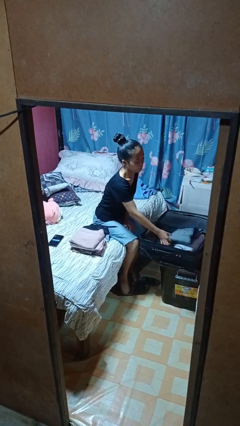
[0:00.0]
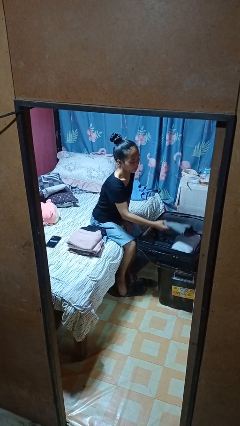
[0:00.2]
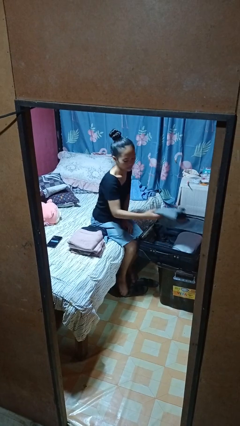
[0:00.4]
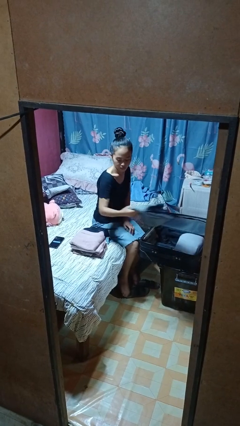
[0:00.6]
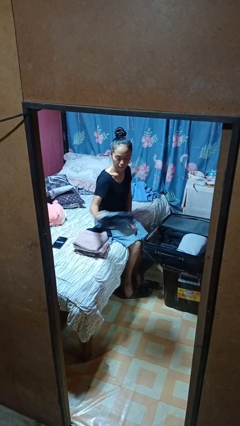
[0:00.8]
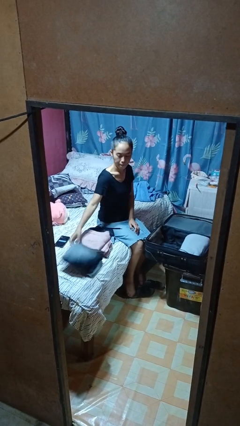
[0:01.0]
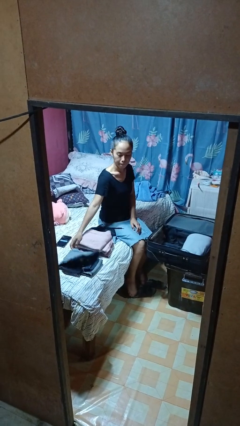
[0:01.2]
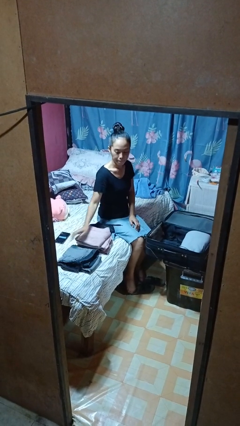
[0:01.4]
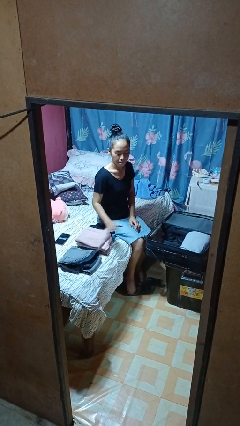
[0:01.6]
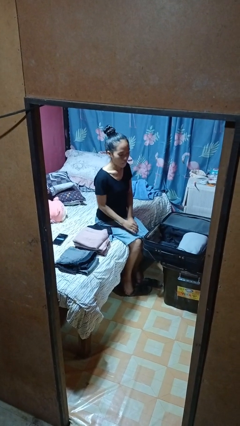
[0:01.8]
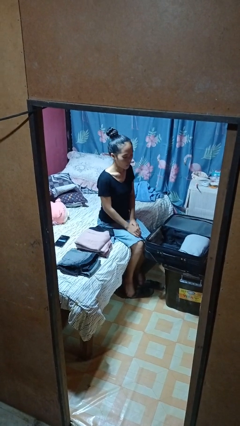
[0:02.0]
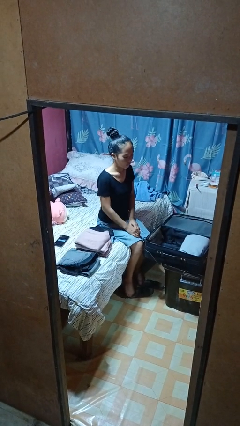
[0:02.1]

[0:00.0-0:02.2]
person unloads clothes from suitcase

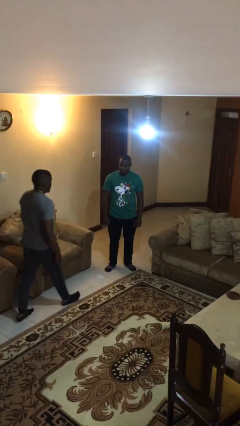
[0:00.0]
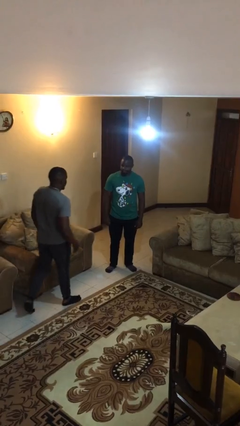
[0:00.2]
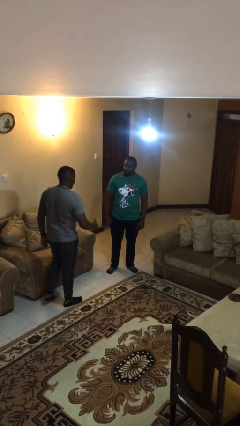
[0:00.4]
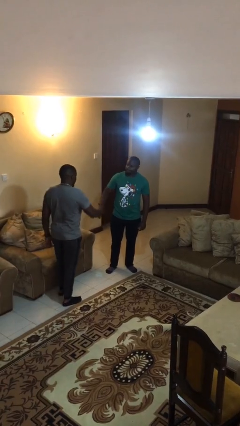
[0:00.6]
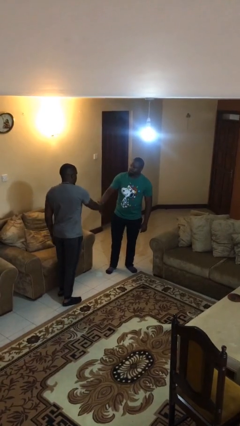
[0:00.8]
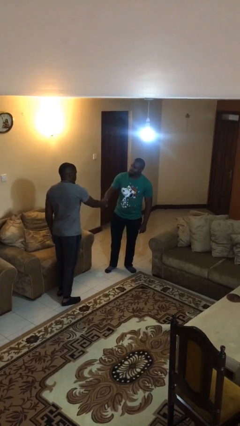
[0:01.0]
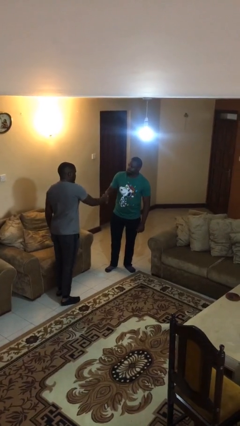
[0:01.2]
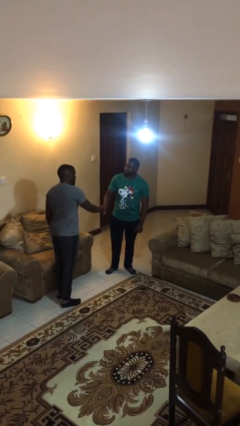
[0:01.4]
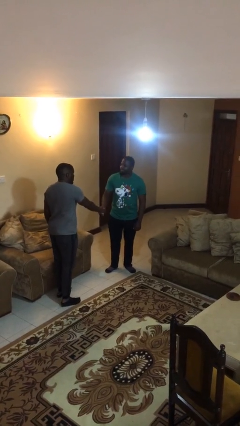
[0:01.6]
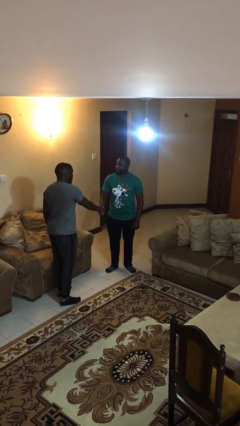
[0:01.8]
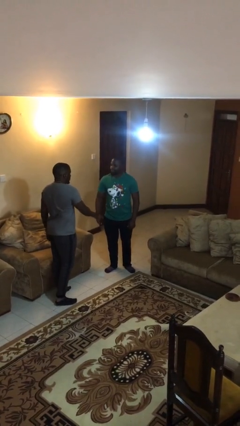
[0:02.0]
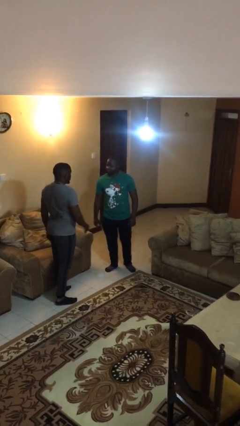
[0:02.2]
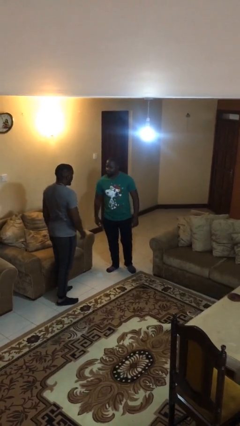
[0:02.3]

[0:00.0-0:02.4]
person shakes hand

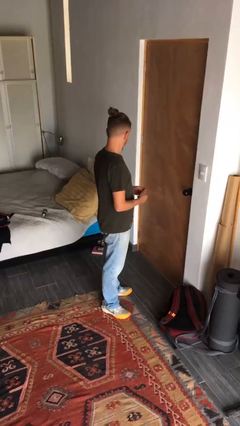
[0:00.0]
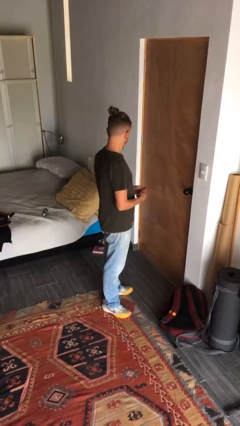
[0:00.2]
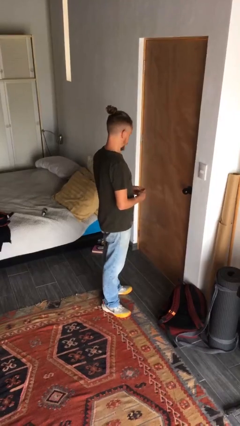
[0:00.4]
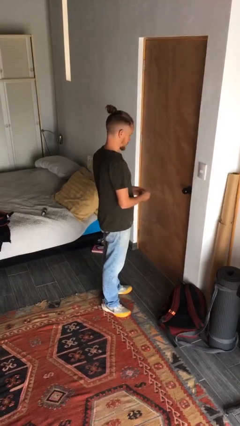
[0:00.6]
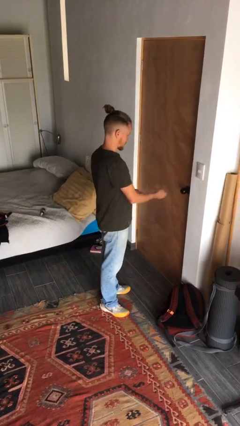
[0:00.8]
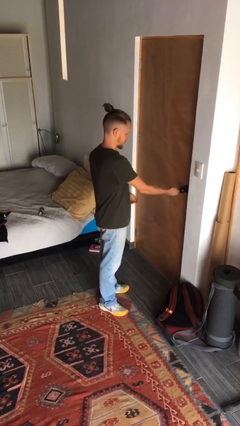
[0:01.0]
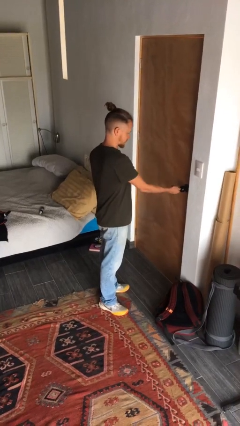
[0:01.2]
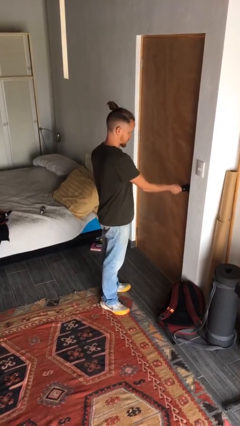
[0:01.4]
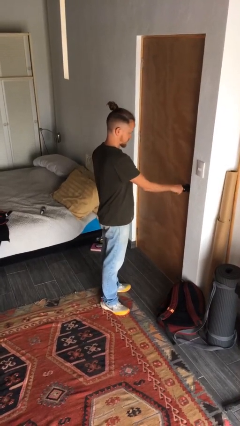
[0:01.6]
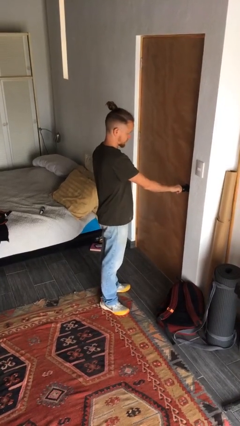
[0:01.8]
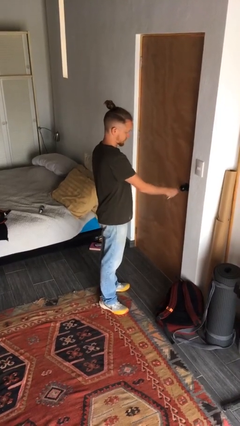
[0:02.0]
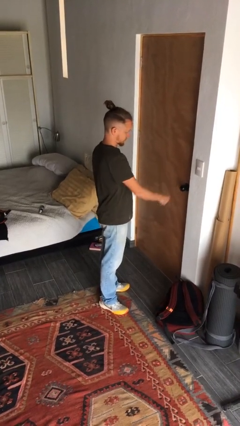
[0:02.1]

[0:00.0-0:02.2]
person unlocks door with keys

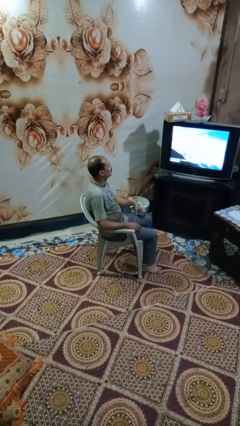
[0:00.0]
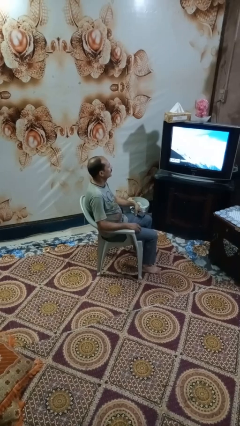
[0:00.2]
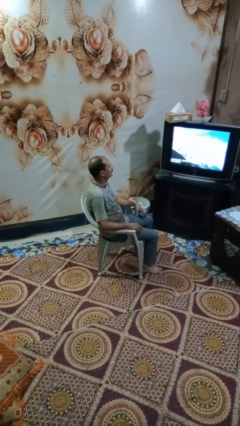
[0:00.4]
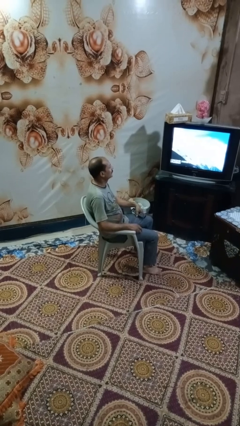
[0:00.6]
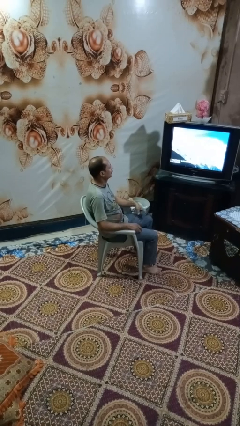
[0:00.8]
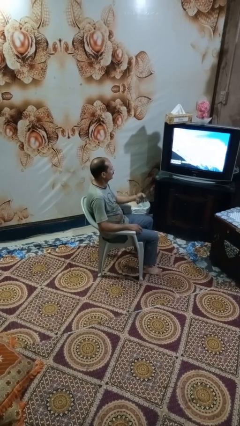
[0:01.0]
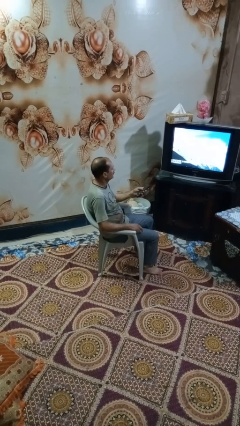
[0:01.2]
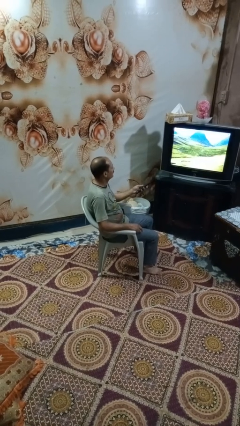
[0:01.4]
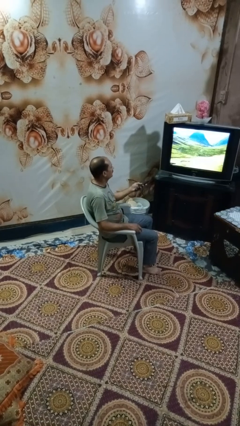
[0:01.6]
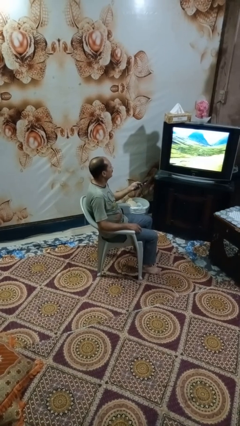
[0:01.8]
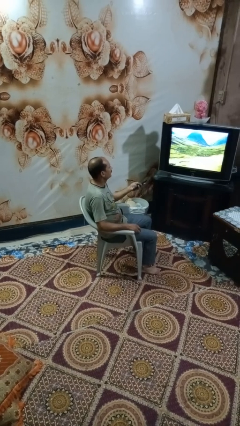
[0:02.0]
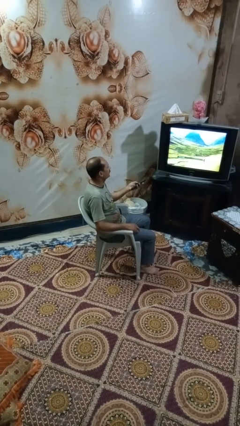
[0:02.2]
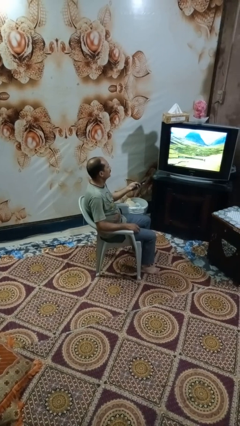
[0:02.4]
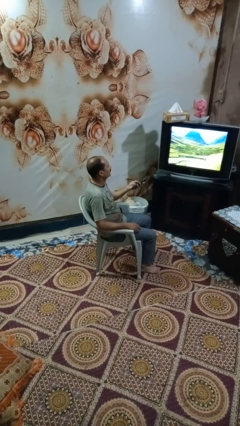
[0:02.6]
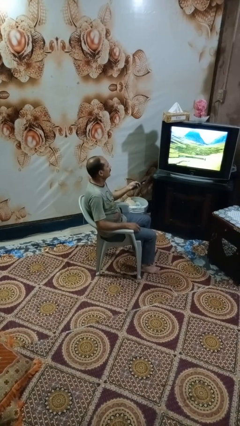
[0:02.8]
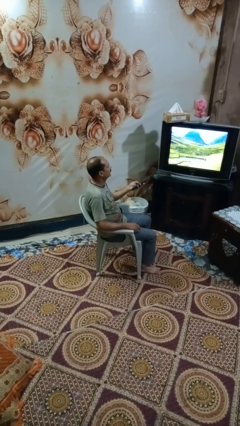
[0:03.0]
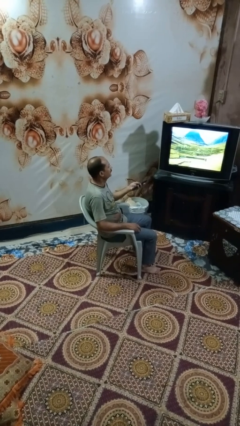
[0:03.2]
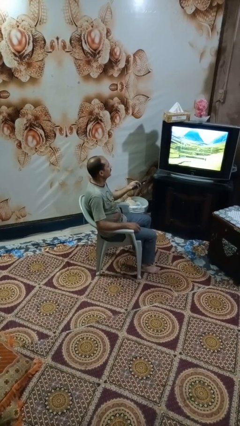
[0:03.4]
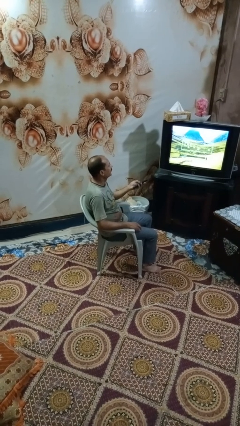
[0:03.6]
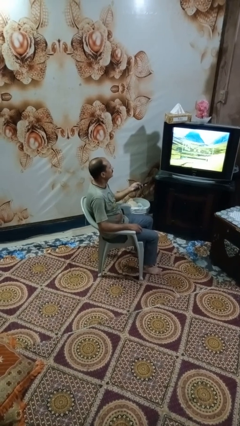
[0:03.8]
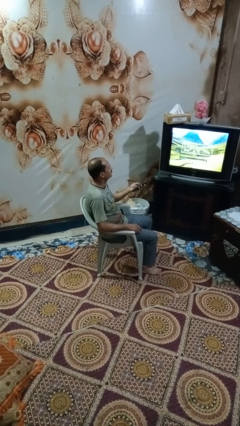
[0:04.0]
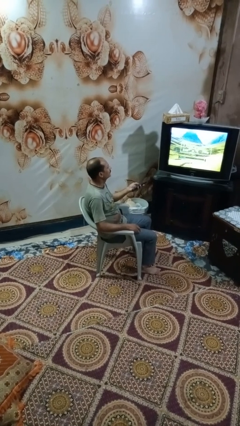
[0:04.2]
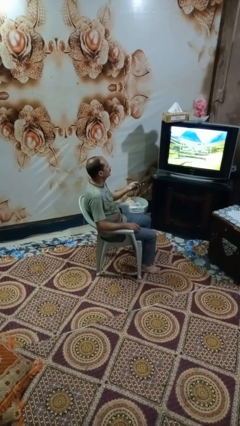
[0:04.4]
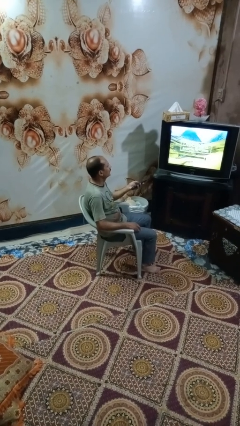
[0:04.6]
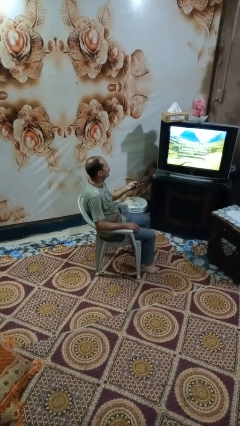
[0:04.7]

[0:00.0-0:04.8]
person uses television remote

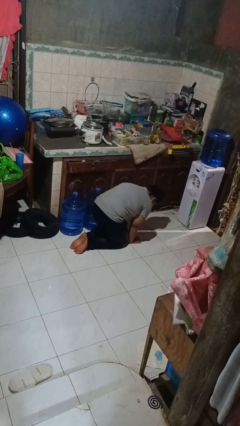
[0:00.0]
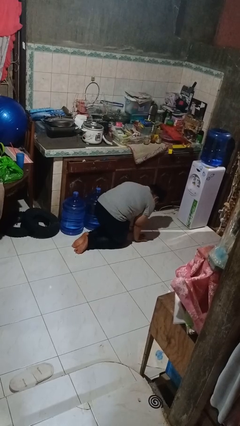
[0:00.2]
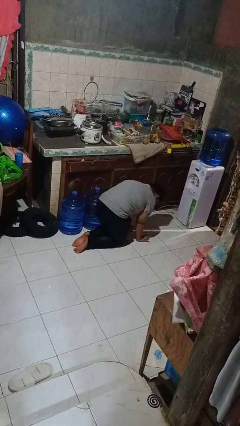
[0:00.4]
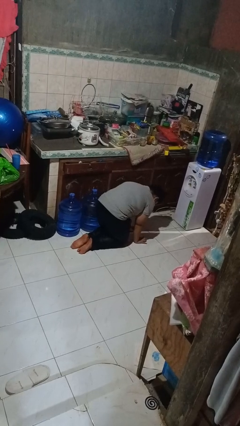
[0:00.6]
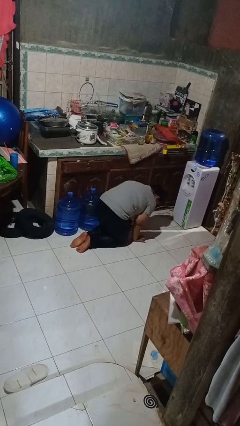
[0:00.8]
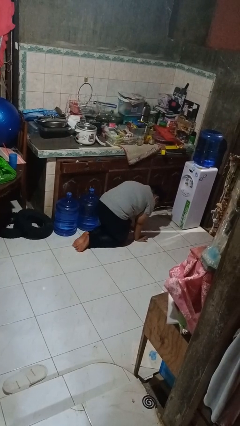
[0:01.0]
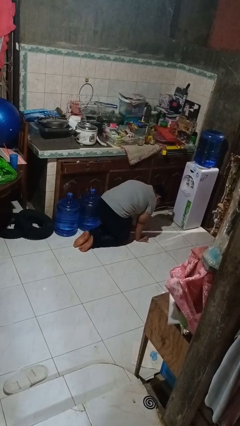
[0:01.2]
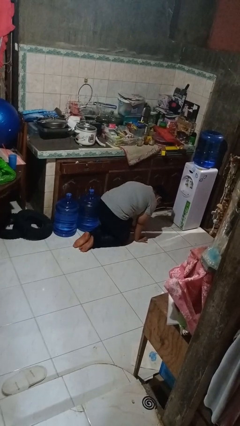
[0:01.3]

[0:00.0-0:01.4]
person crawls

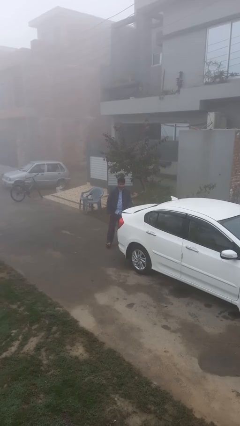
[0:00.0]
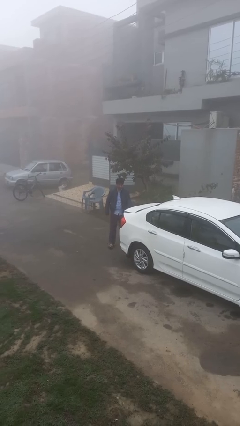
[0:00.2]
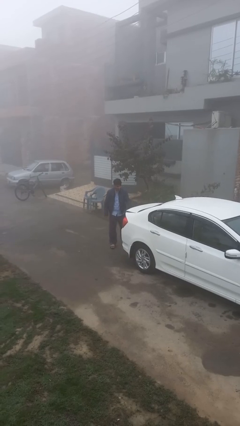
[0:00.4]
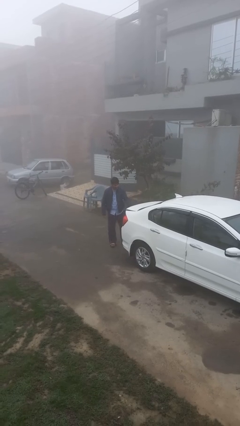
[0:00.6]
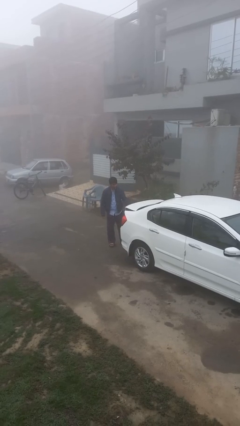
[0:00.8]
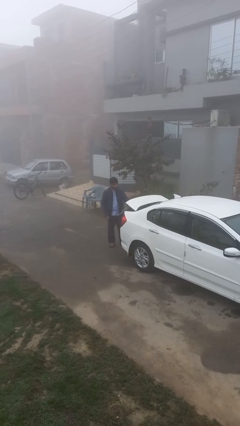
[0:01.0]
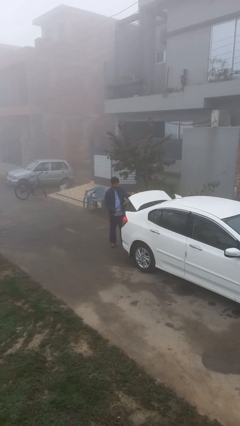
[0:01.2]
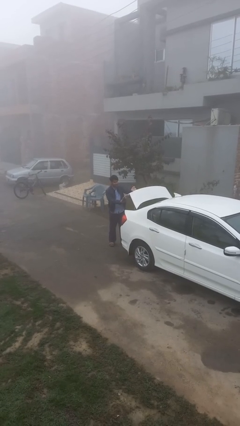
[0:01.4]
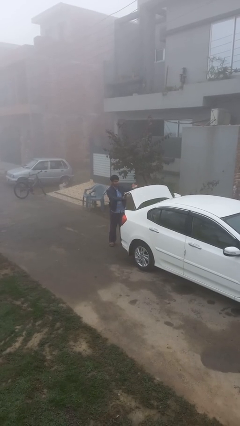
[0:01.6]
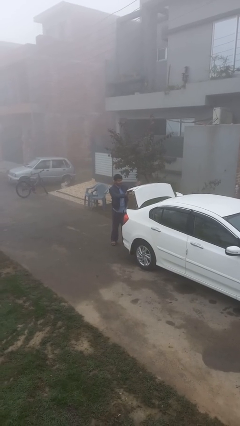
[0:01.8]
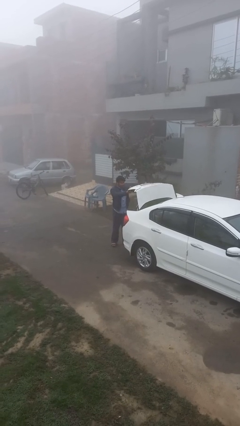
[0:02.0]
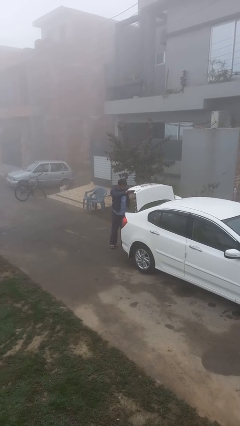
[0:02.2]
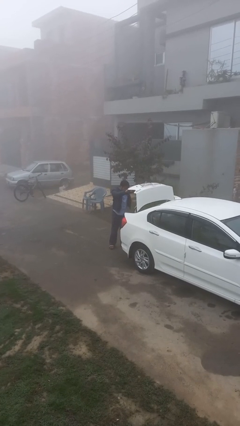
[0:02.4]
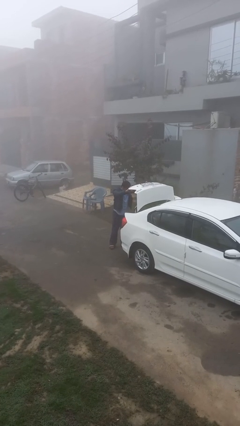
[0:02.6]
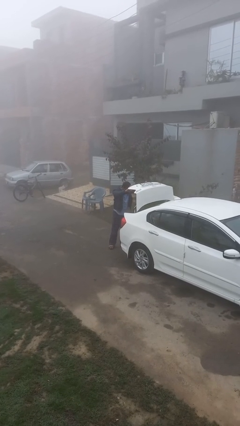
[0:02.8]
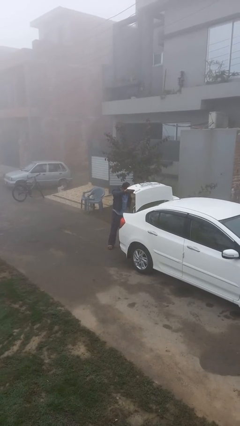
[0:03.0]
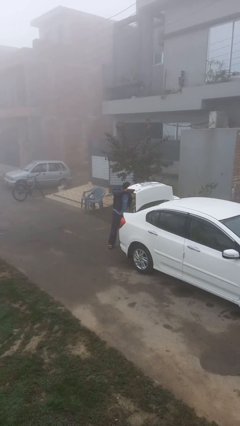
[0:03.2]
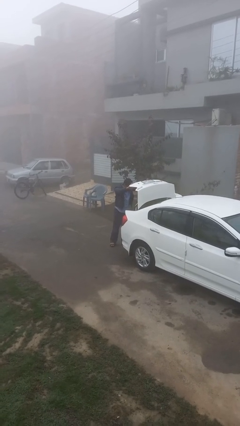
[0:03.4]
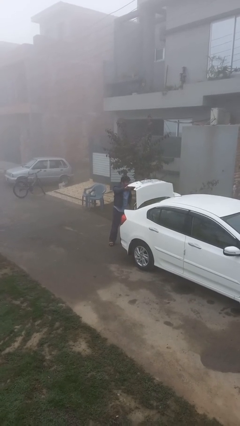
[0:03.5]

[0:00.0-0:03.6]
person opens car trunk

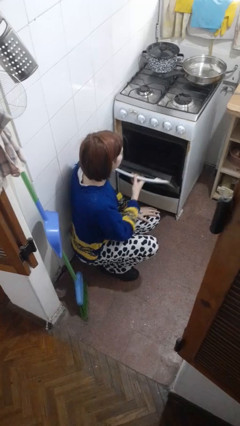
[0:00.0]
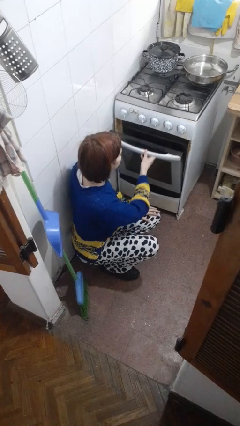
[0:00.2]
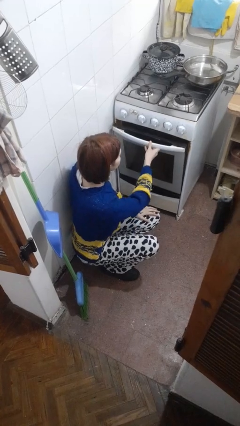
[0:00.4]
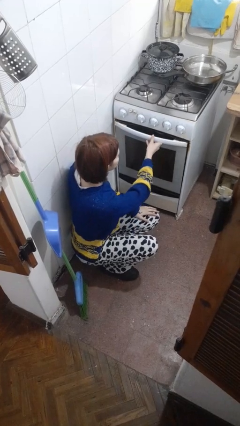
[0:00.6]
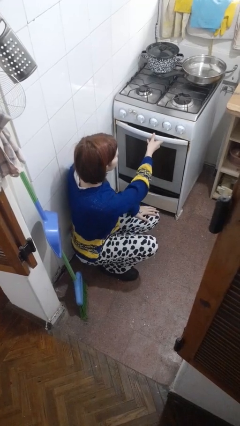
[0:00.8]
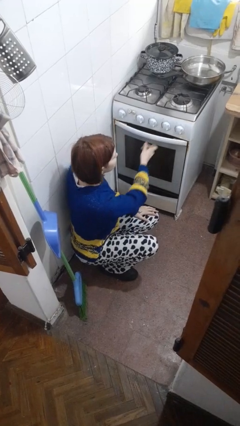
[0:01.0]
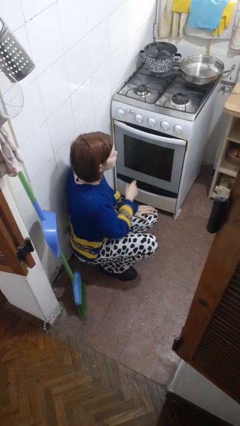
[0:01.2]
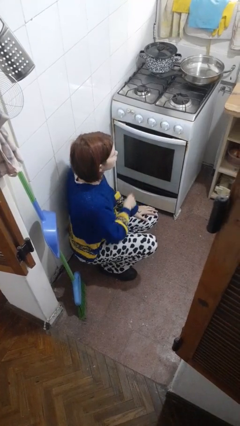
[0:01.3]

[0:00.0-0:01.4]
person closes oven door
